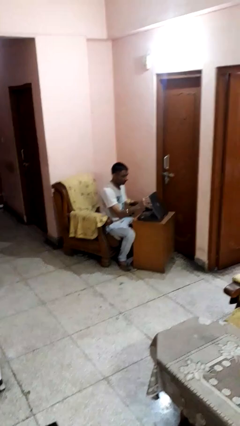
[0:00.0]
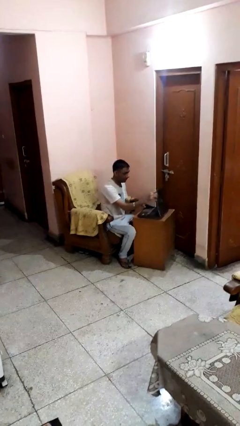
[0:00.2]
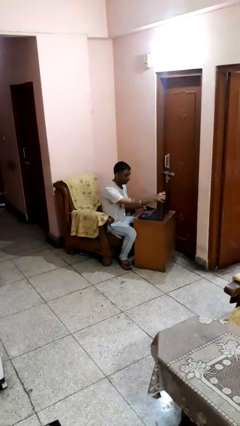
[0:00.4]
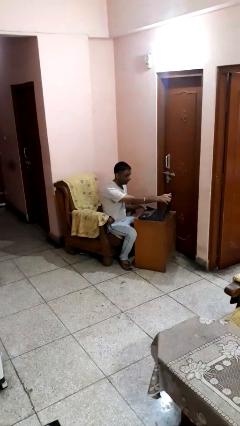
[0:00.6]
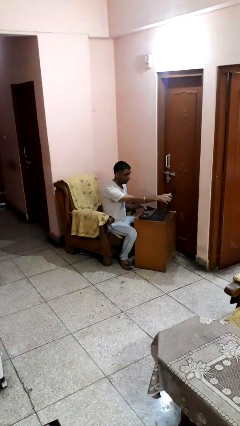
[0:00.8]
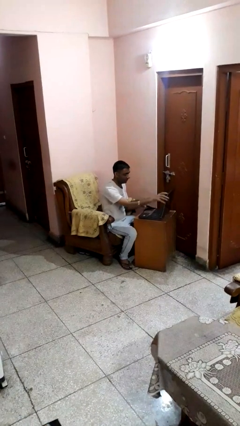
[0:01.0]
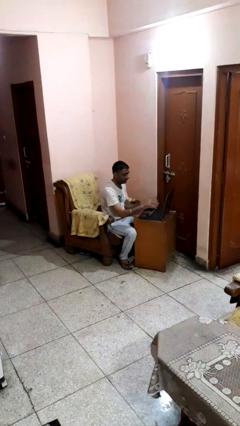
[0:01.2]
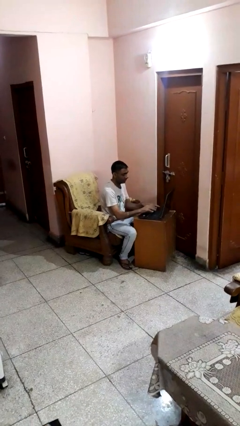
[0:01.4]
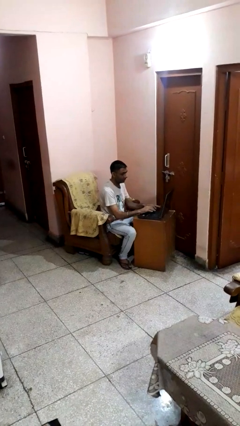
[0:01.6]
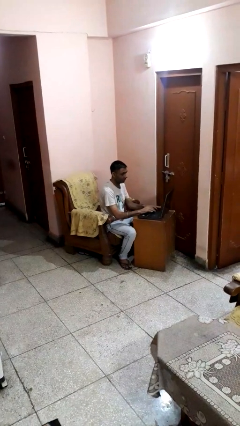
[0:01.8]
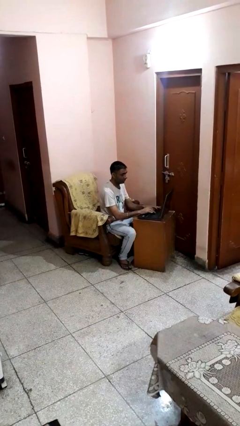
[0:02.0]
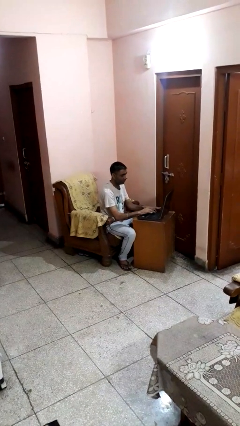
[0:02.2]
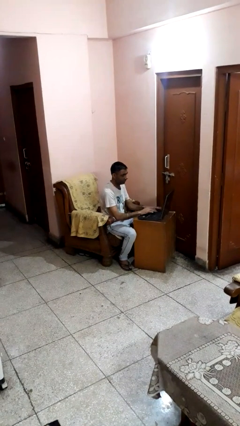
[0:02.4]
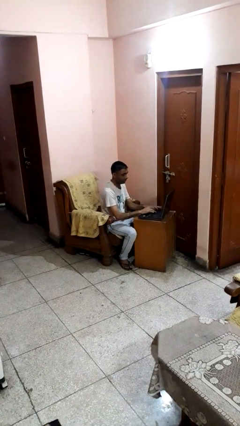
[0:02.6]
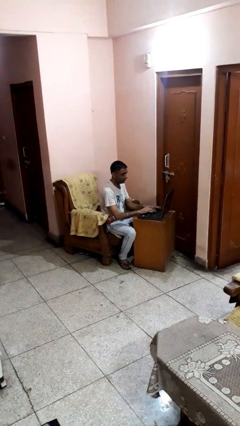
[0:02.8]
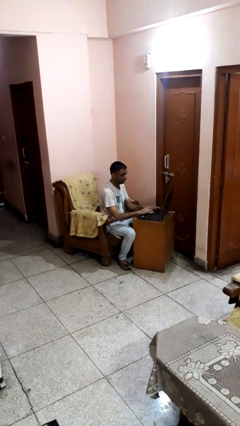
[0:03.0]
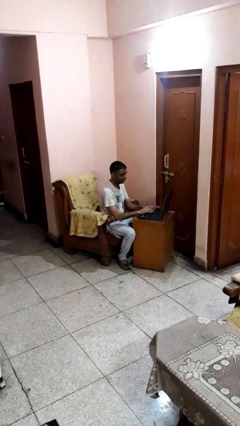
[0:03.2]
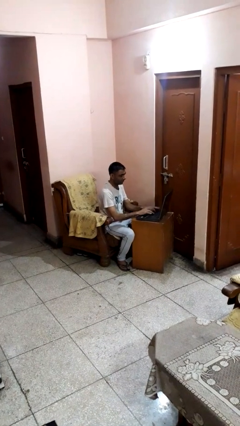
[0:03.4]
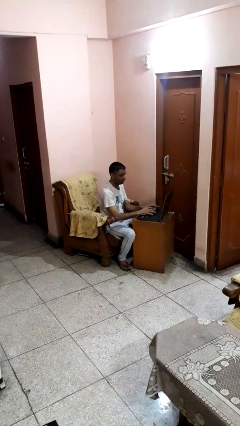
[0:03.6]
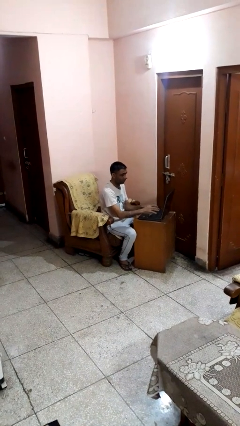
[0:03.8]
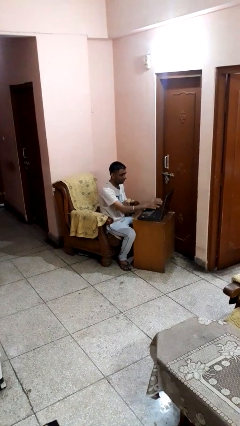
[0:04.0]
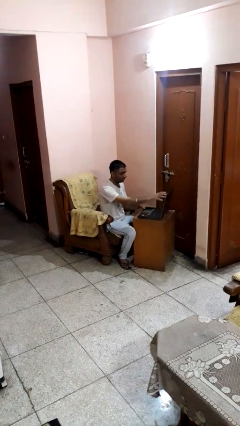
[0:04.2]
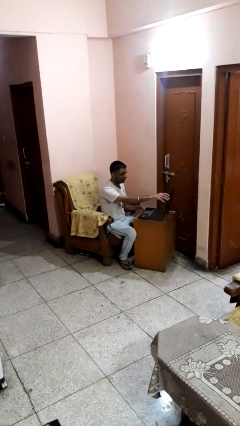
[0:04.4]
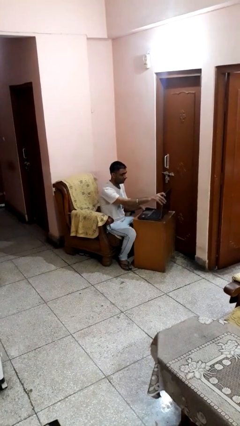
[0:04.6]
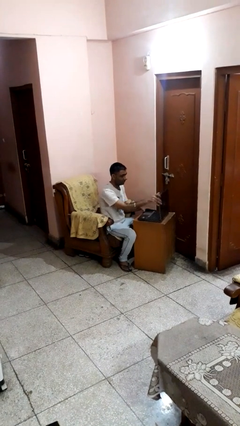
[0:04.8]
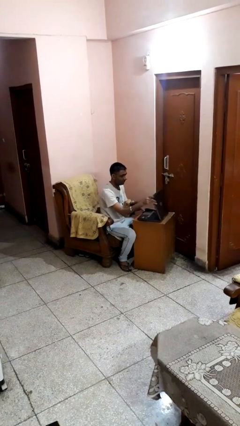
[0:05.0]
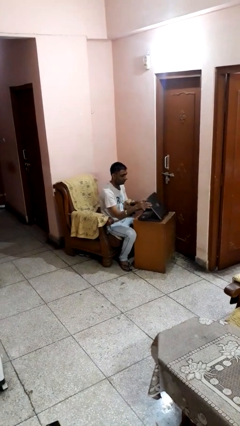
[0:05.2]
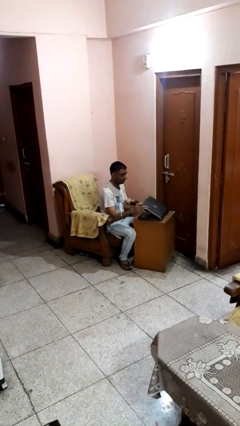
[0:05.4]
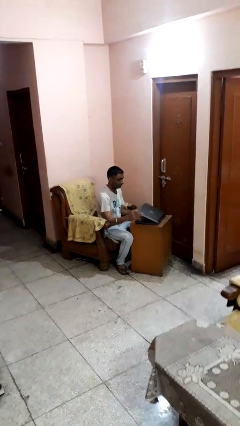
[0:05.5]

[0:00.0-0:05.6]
person interacts with laptop

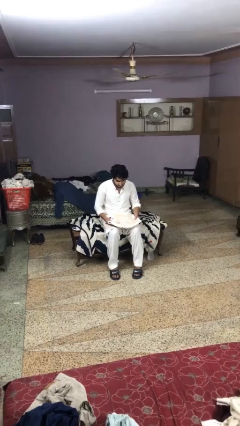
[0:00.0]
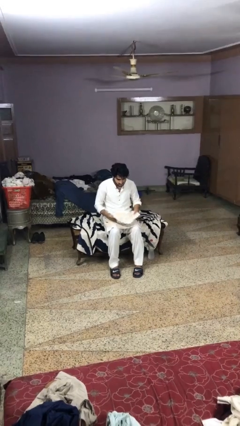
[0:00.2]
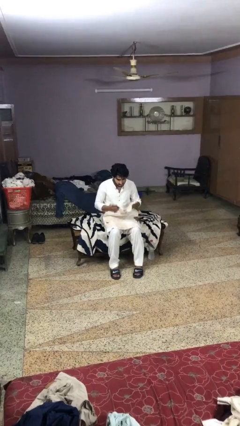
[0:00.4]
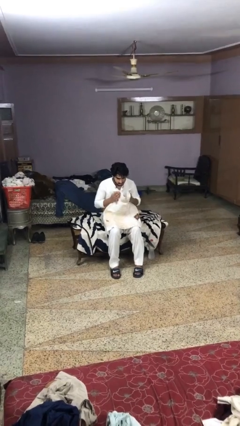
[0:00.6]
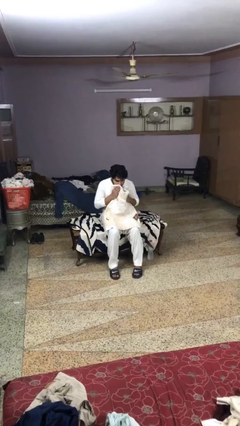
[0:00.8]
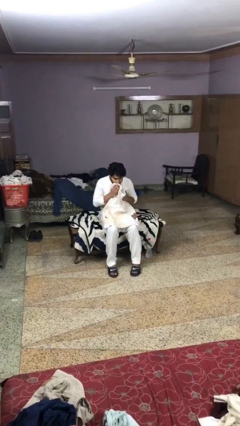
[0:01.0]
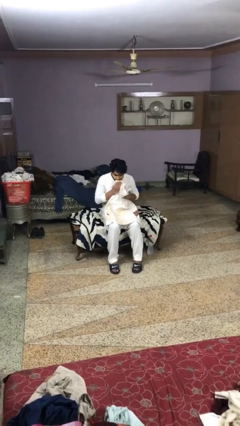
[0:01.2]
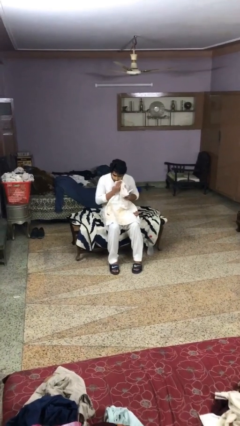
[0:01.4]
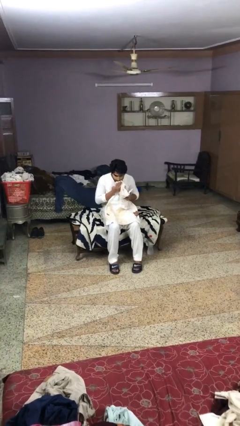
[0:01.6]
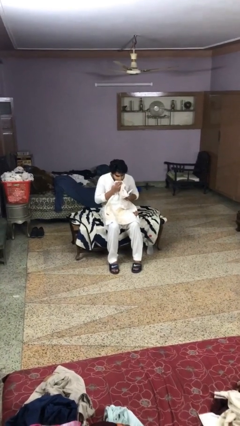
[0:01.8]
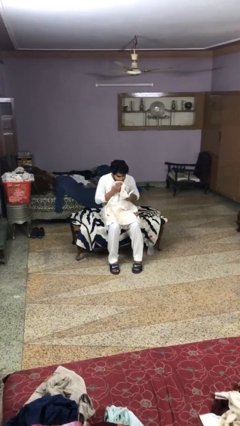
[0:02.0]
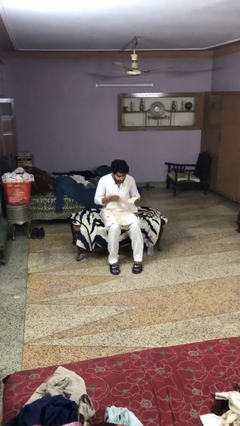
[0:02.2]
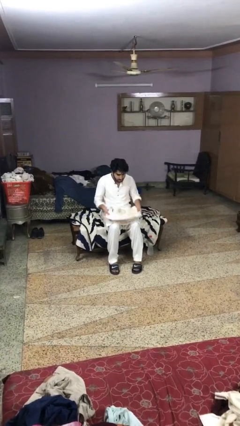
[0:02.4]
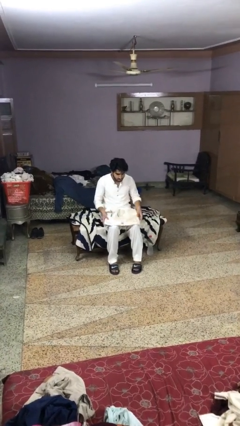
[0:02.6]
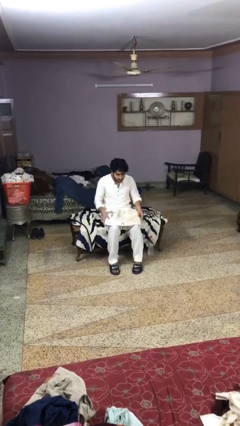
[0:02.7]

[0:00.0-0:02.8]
person wipes mouth with napkin

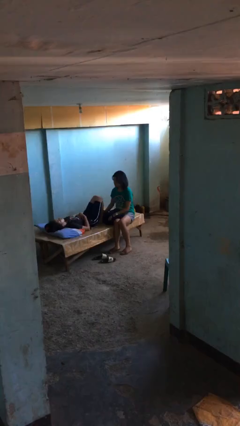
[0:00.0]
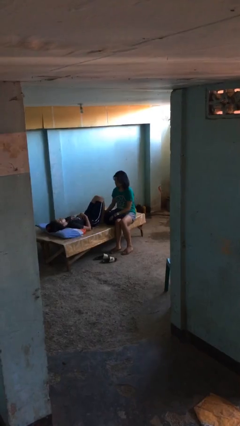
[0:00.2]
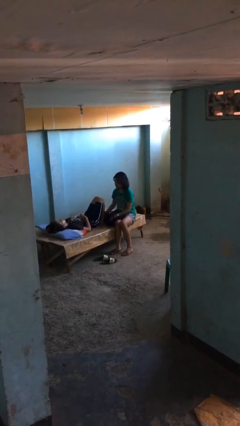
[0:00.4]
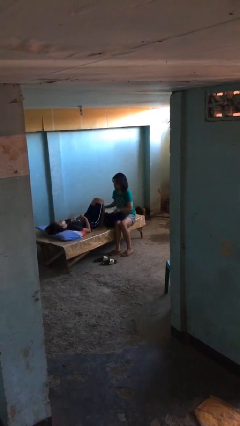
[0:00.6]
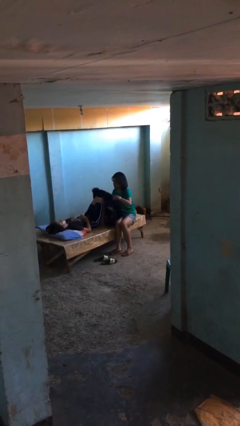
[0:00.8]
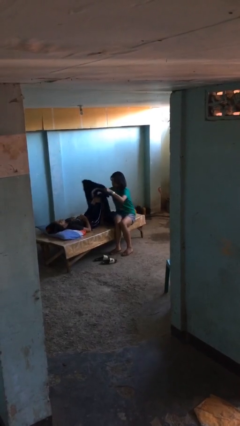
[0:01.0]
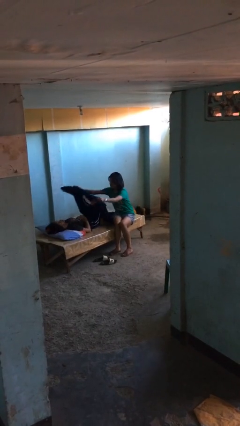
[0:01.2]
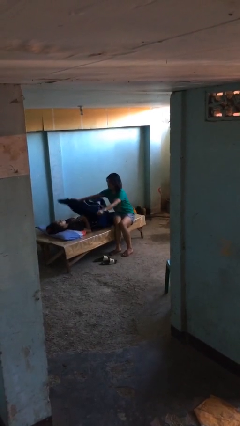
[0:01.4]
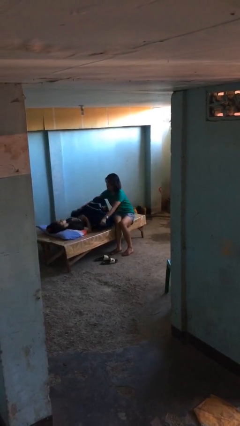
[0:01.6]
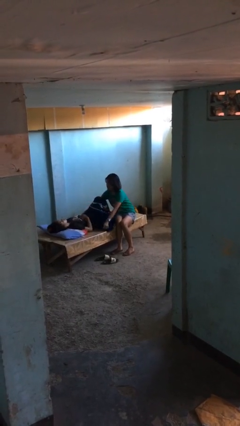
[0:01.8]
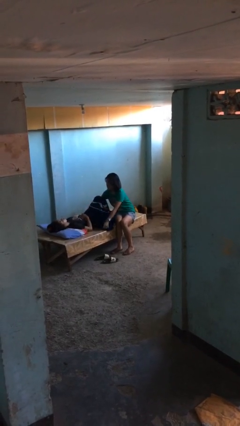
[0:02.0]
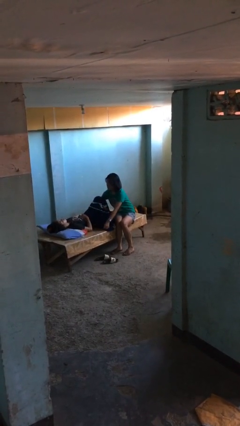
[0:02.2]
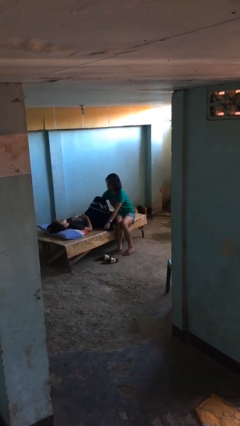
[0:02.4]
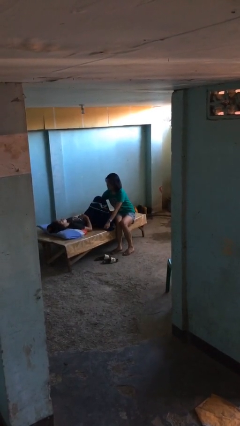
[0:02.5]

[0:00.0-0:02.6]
person covers friend with blanket

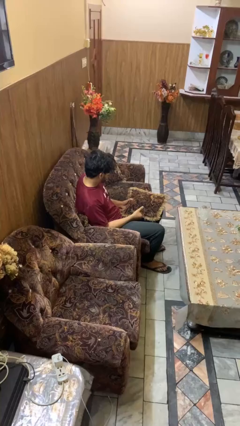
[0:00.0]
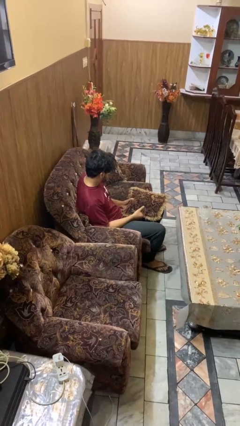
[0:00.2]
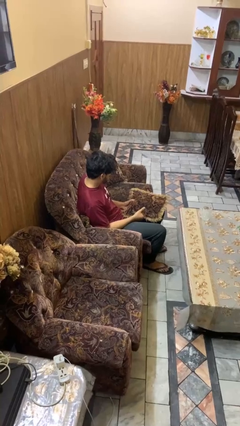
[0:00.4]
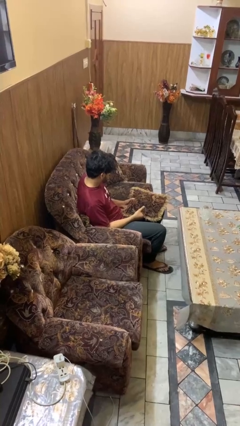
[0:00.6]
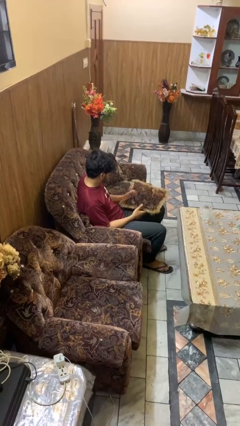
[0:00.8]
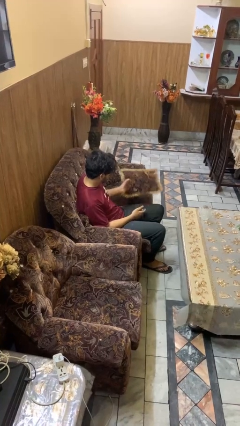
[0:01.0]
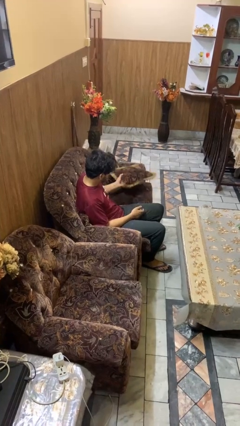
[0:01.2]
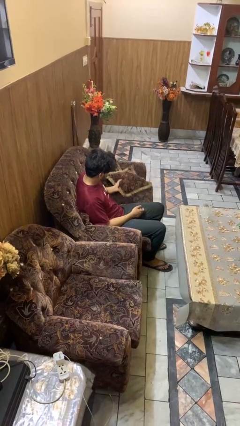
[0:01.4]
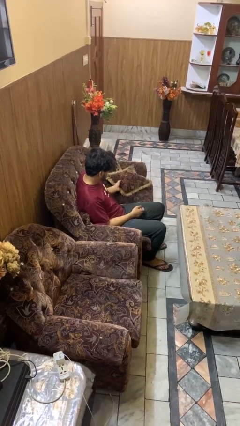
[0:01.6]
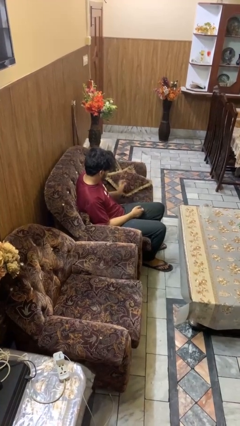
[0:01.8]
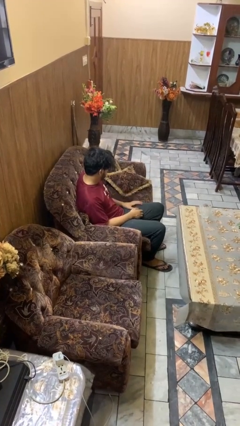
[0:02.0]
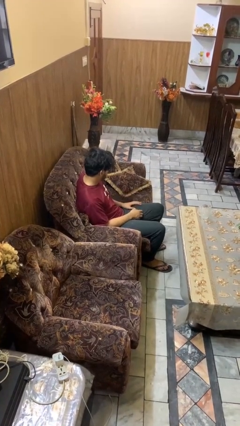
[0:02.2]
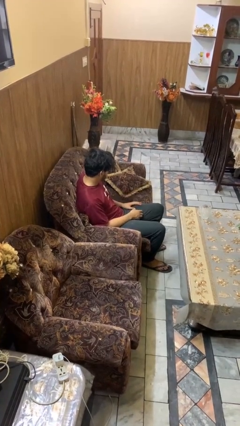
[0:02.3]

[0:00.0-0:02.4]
person puts down object on couch

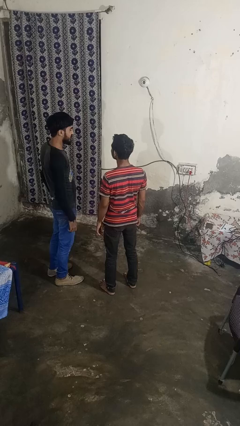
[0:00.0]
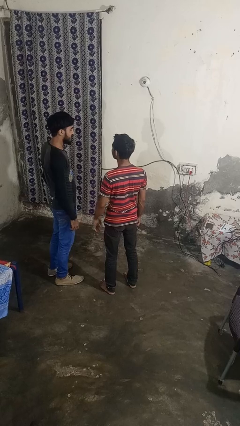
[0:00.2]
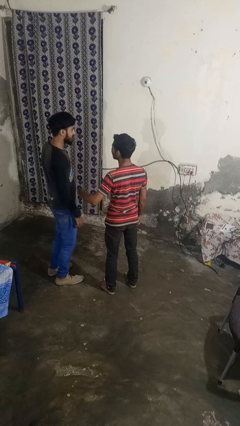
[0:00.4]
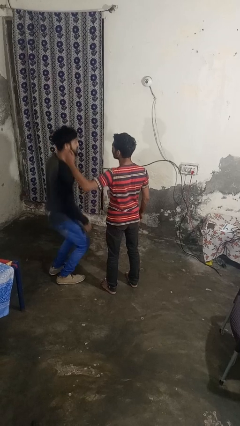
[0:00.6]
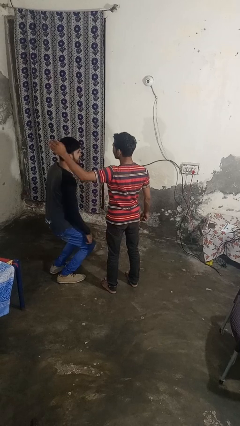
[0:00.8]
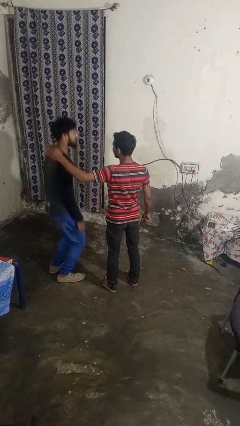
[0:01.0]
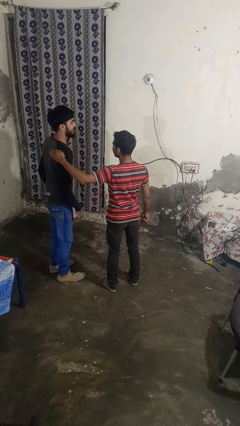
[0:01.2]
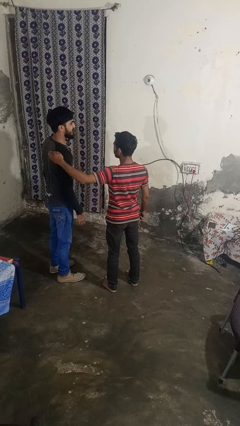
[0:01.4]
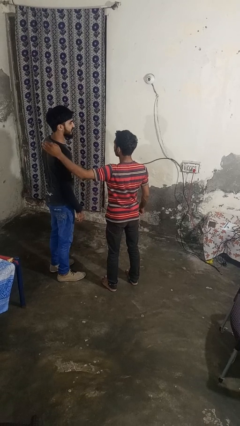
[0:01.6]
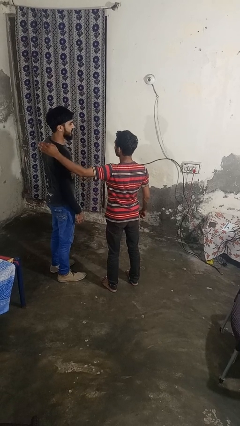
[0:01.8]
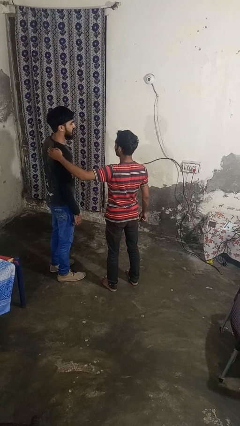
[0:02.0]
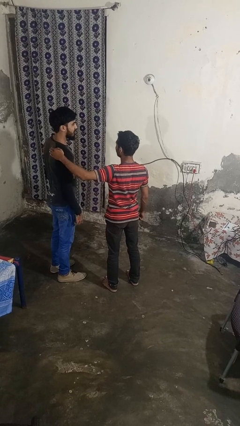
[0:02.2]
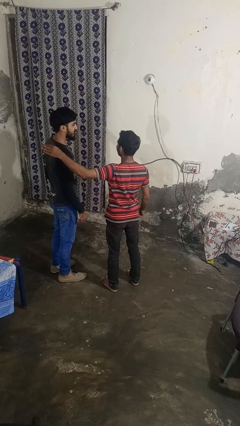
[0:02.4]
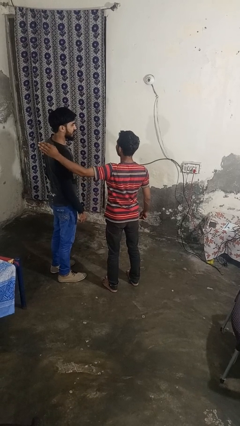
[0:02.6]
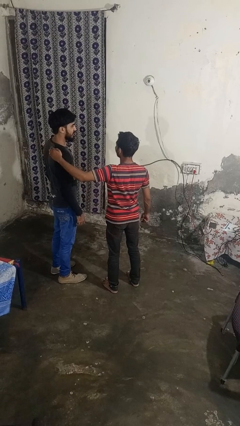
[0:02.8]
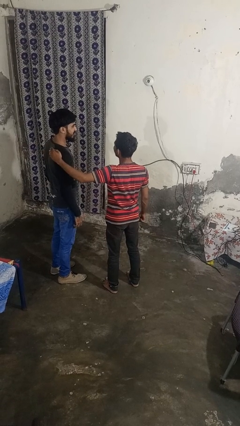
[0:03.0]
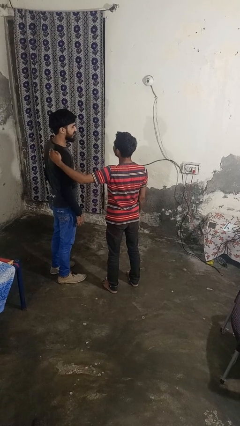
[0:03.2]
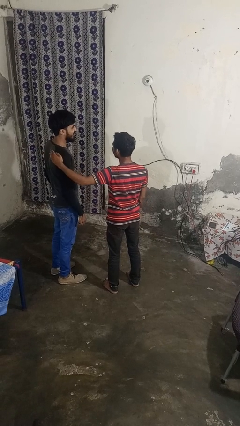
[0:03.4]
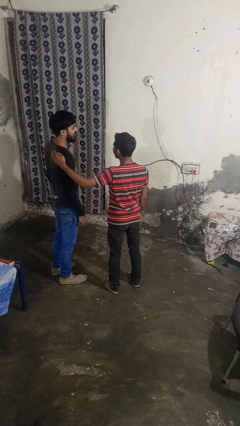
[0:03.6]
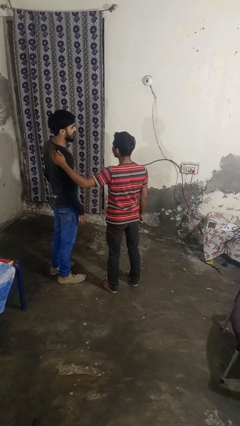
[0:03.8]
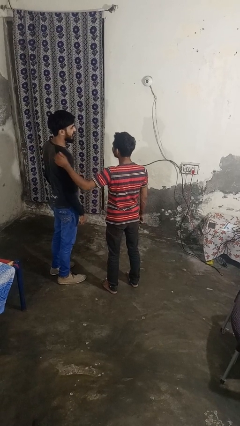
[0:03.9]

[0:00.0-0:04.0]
person pounds shoulders of person

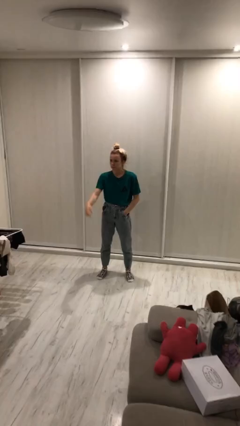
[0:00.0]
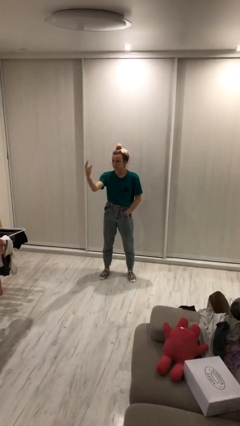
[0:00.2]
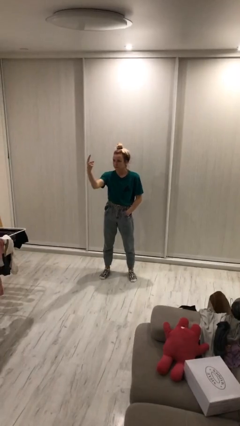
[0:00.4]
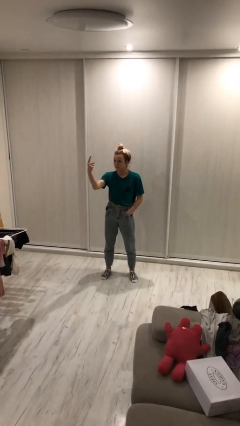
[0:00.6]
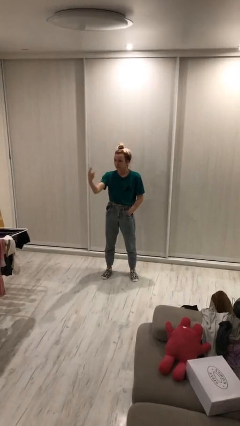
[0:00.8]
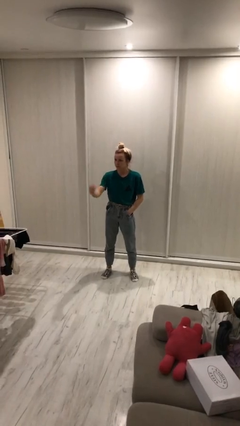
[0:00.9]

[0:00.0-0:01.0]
person gestures number one
